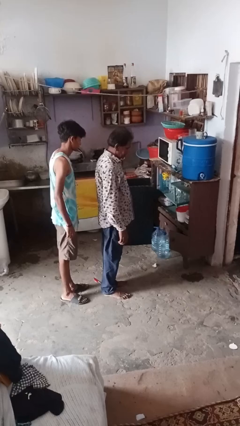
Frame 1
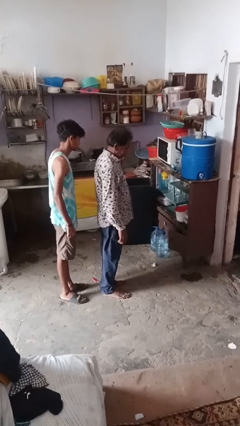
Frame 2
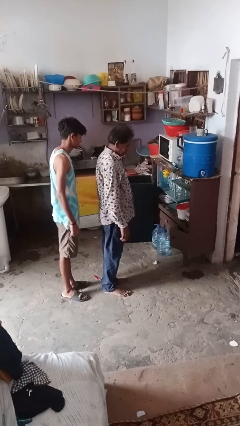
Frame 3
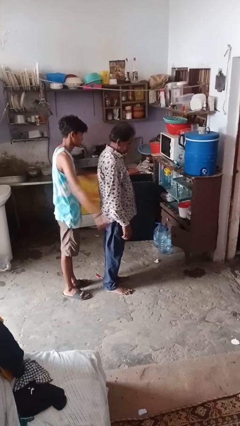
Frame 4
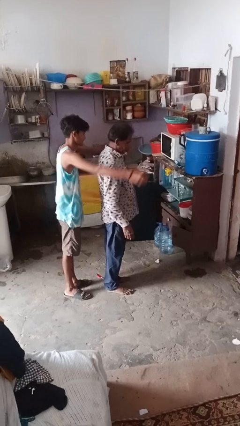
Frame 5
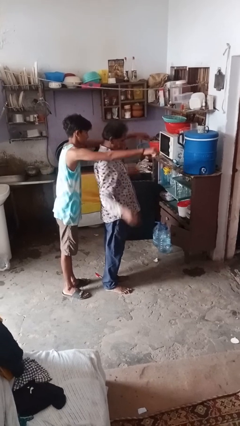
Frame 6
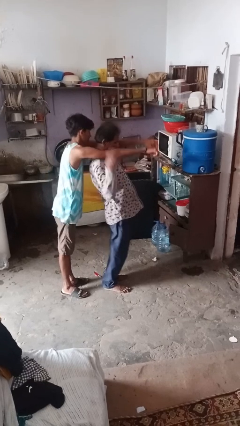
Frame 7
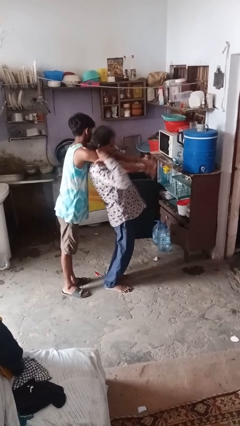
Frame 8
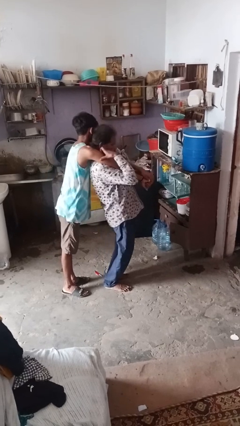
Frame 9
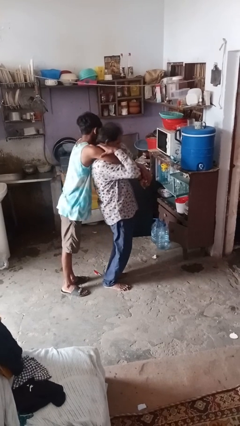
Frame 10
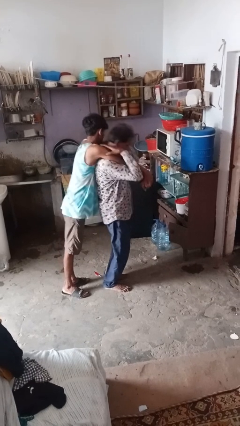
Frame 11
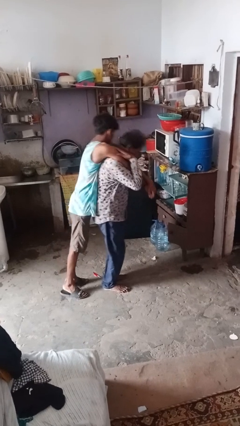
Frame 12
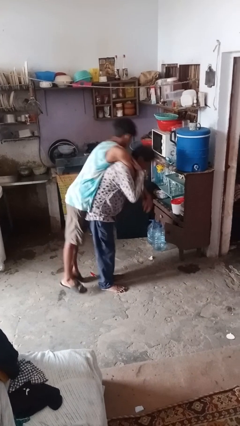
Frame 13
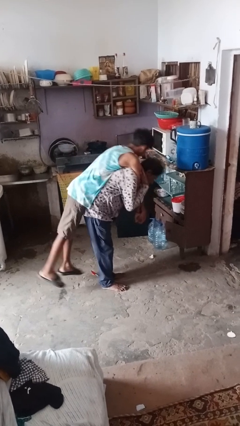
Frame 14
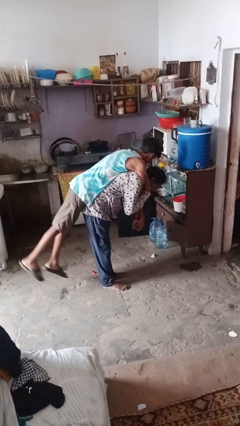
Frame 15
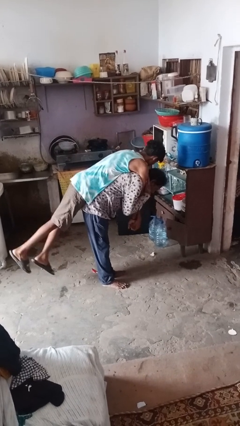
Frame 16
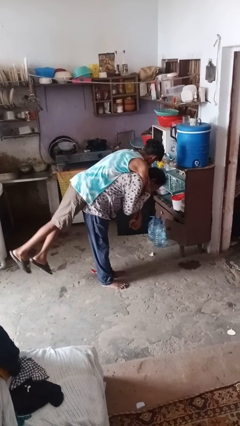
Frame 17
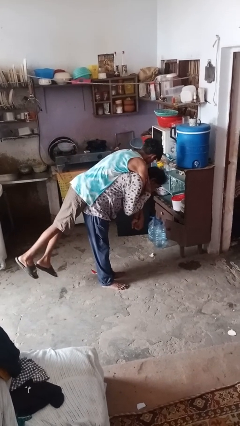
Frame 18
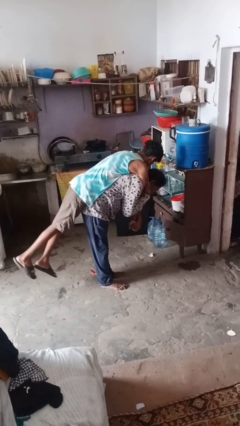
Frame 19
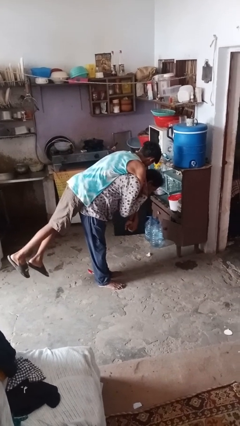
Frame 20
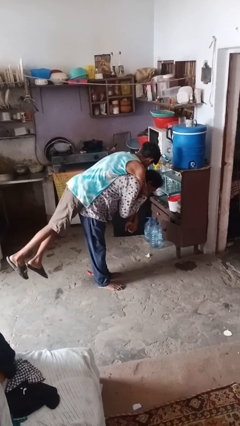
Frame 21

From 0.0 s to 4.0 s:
person carries person over shoulder

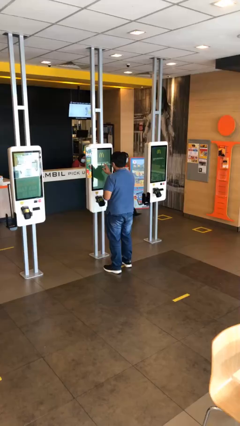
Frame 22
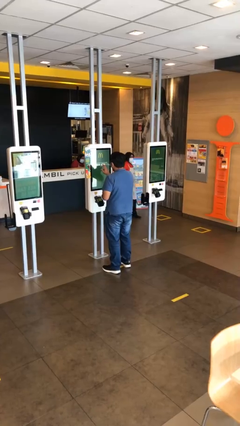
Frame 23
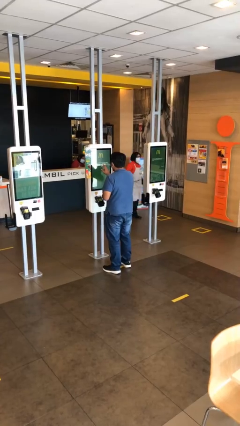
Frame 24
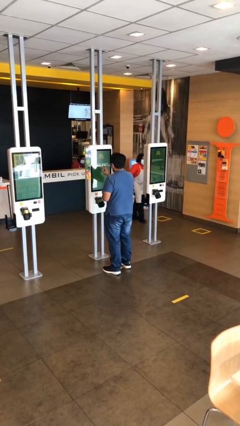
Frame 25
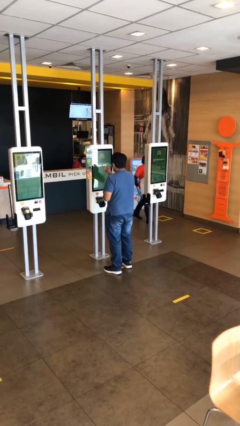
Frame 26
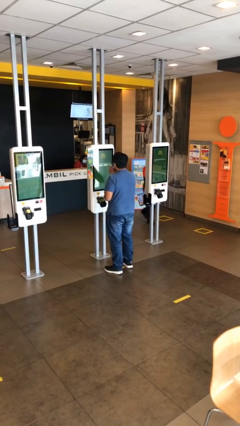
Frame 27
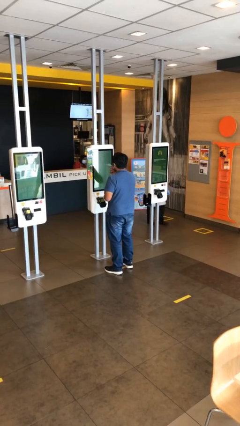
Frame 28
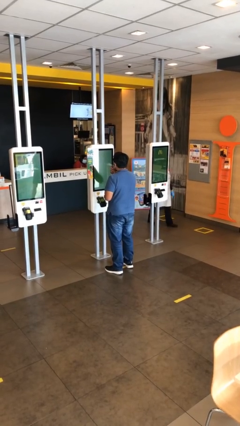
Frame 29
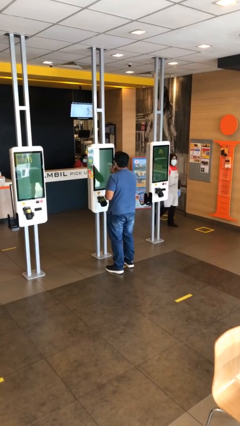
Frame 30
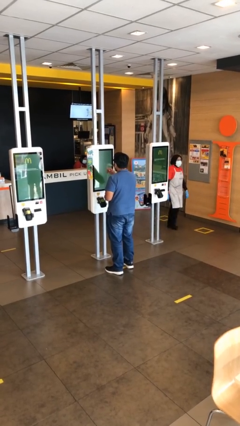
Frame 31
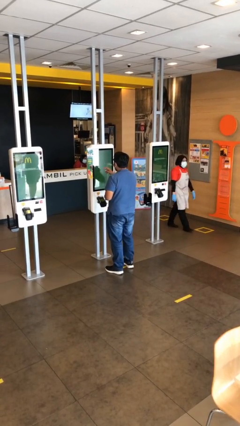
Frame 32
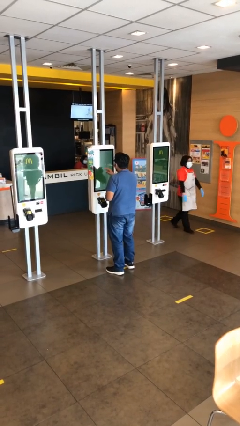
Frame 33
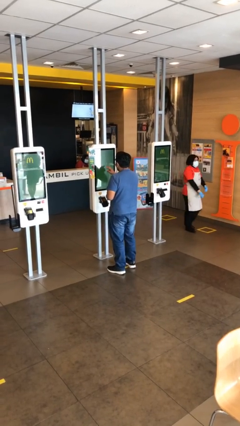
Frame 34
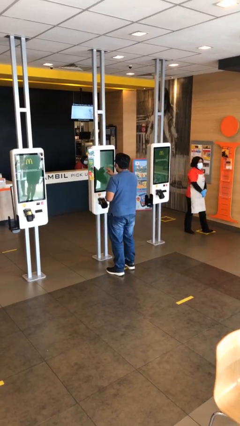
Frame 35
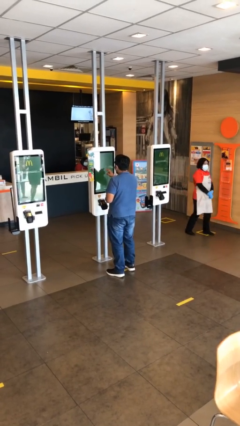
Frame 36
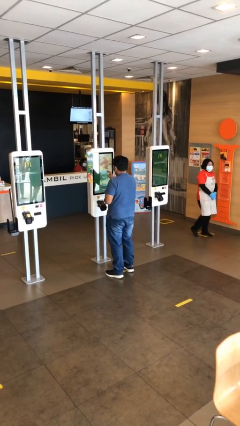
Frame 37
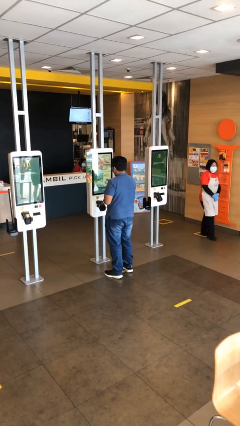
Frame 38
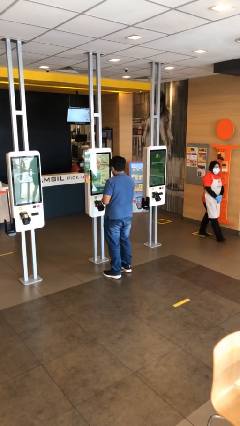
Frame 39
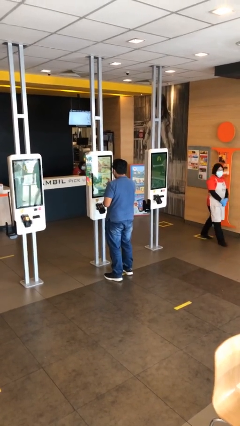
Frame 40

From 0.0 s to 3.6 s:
person purchases from machine

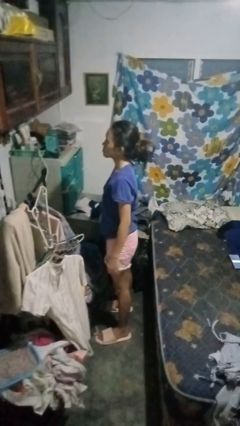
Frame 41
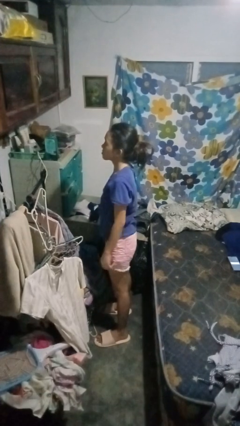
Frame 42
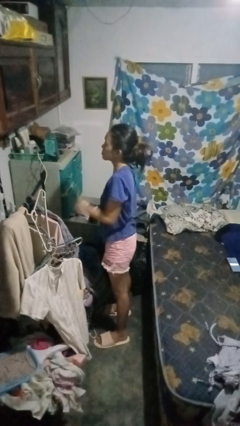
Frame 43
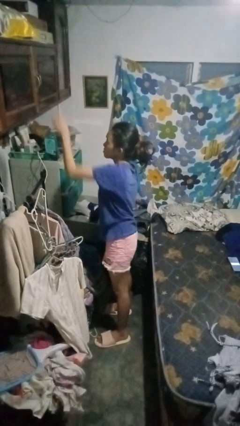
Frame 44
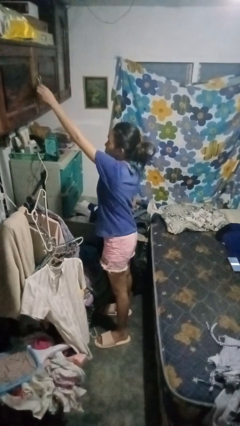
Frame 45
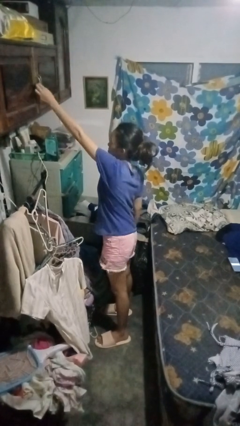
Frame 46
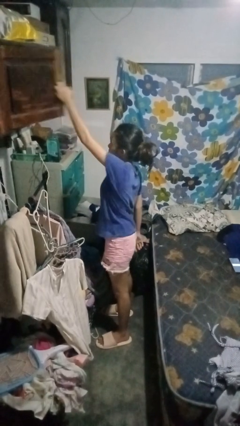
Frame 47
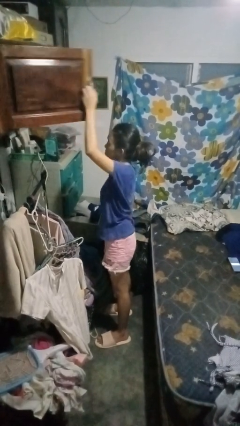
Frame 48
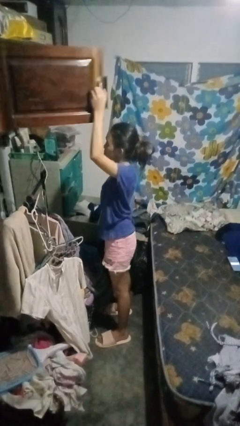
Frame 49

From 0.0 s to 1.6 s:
person opens closet door

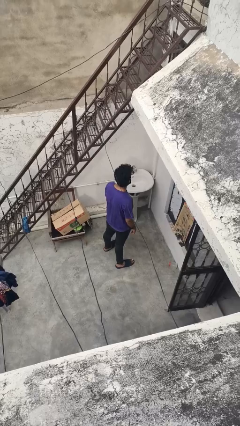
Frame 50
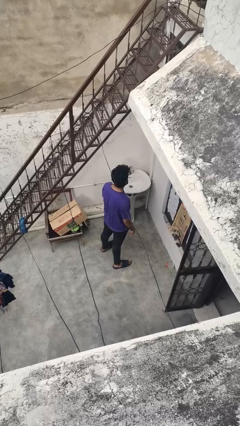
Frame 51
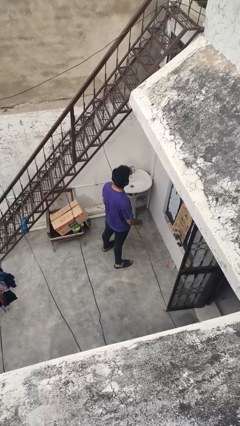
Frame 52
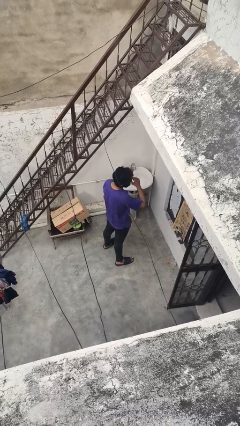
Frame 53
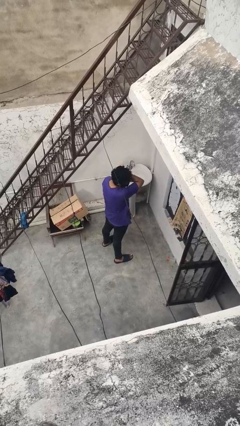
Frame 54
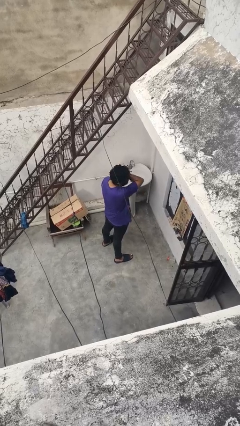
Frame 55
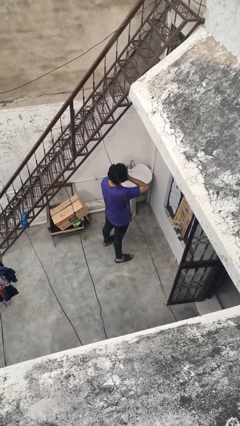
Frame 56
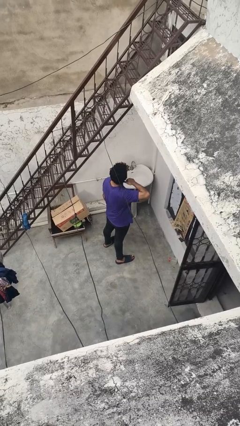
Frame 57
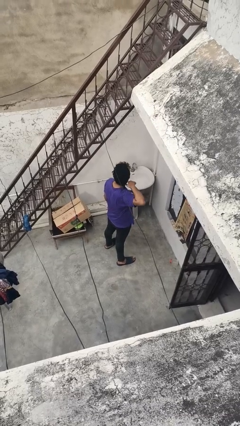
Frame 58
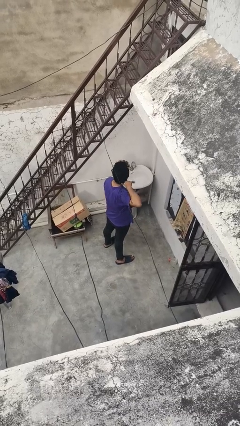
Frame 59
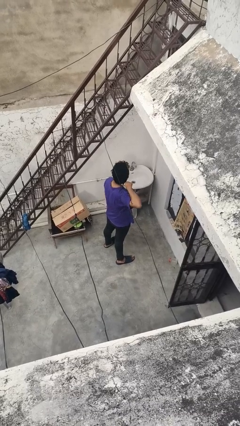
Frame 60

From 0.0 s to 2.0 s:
person gestures cut

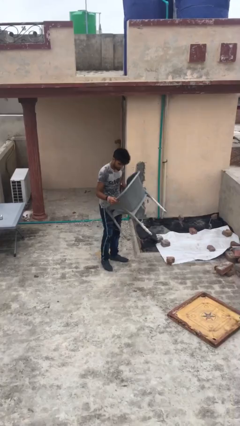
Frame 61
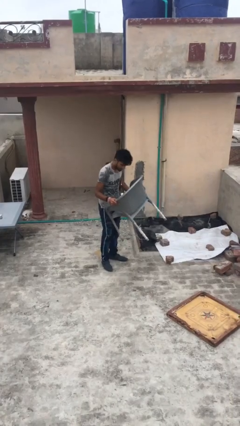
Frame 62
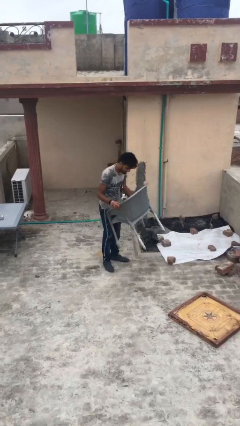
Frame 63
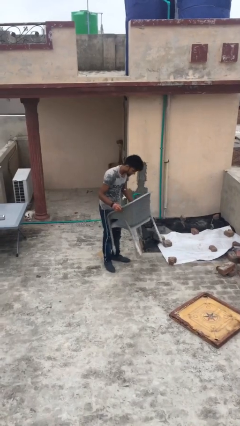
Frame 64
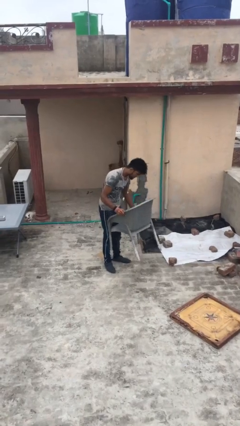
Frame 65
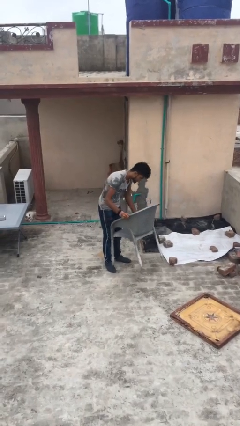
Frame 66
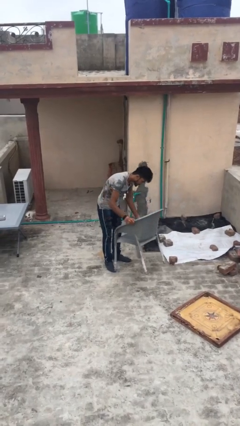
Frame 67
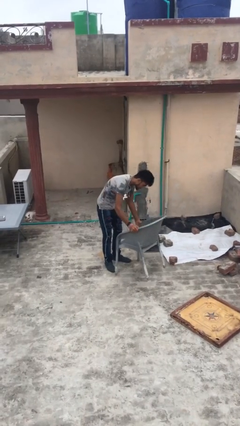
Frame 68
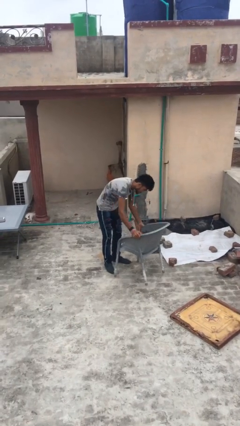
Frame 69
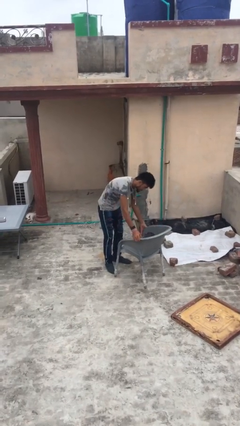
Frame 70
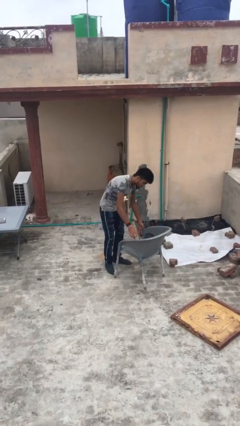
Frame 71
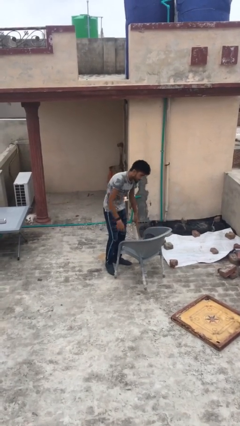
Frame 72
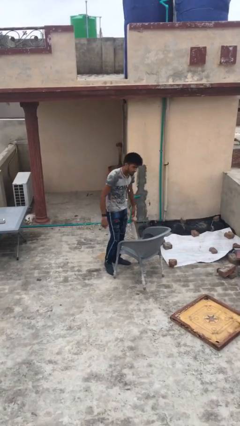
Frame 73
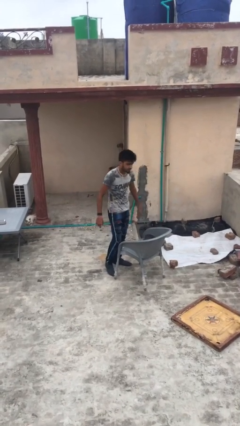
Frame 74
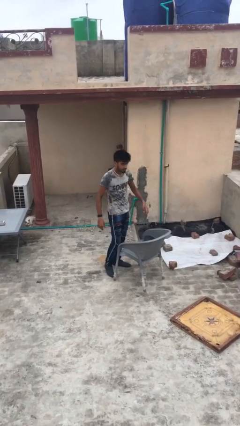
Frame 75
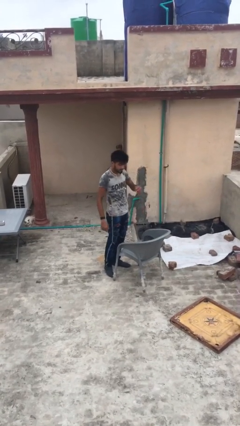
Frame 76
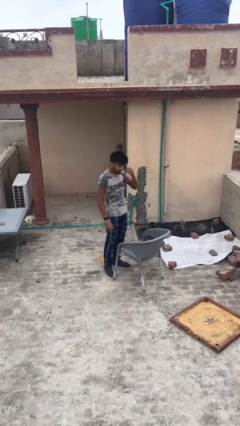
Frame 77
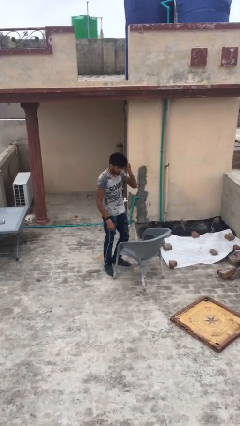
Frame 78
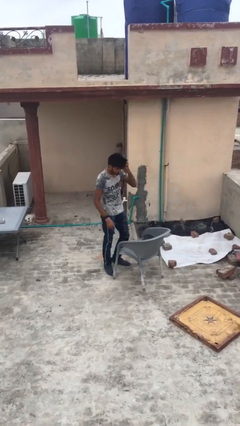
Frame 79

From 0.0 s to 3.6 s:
person puts down object on floor

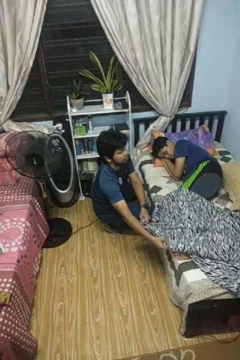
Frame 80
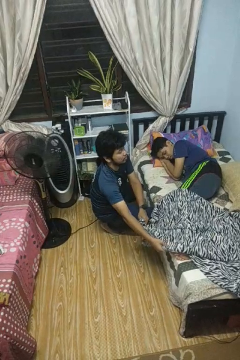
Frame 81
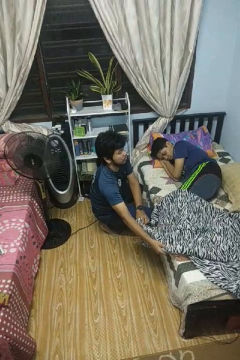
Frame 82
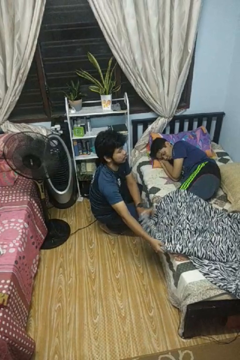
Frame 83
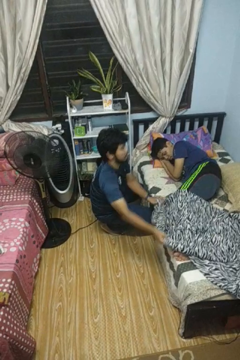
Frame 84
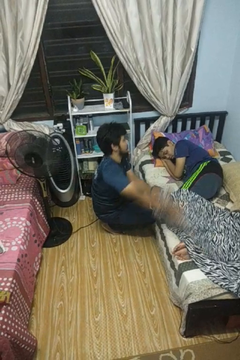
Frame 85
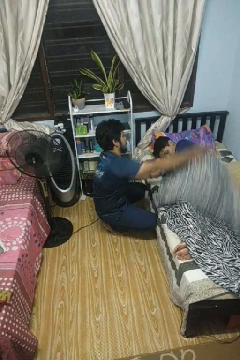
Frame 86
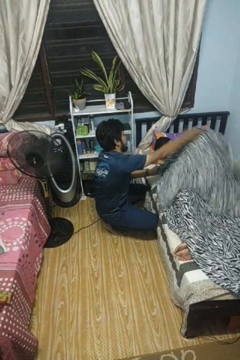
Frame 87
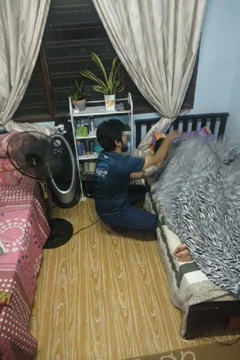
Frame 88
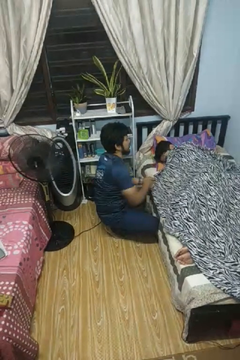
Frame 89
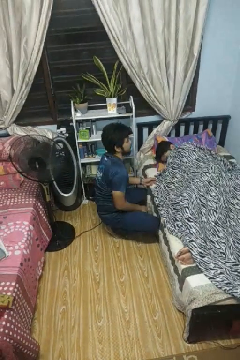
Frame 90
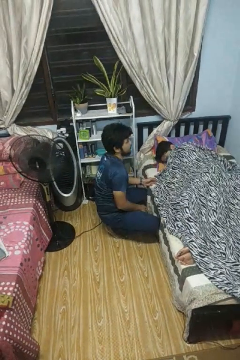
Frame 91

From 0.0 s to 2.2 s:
person covers friend with blanket

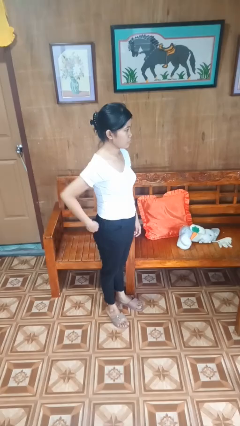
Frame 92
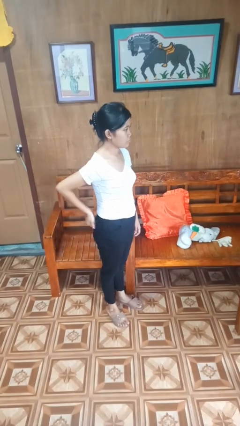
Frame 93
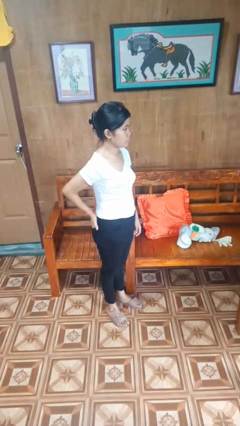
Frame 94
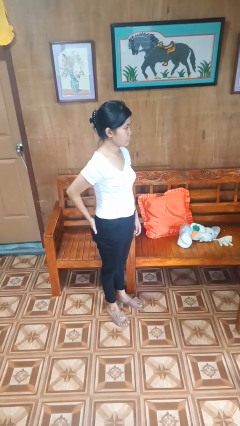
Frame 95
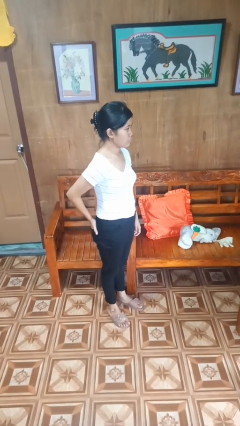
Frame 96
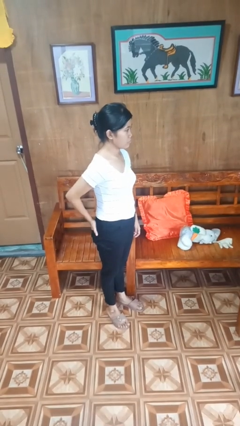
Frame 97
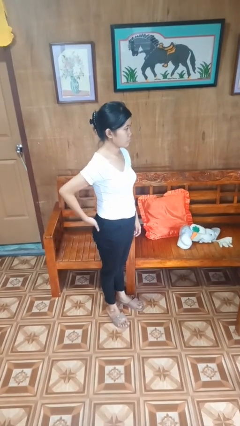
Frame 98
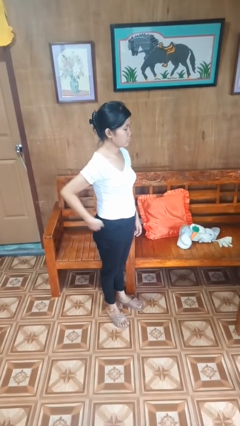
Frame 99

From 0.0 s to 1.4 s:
person puts hands in back pockets
